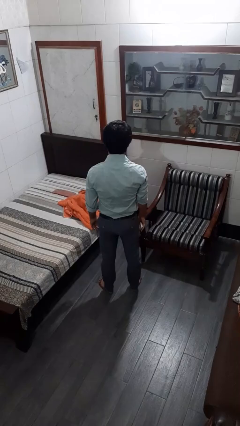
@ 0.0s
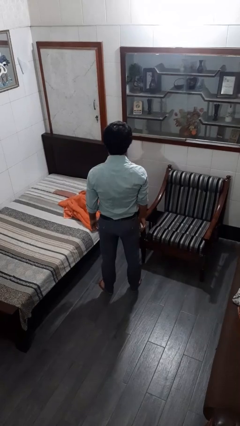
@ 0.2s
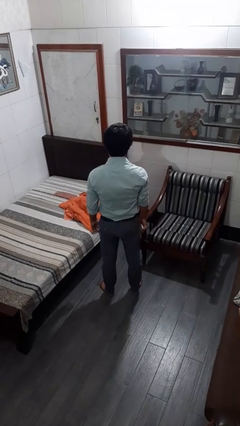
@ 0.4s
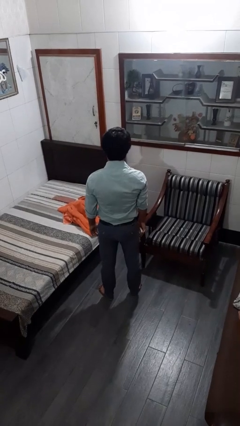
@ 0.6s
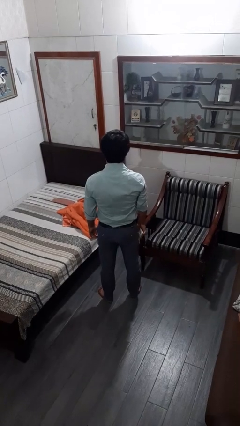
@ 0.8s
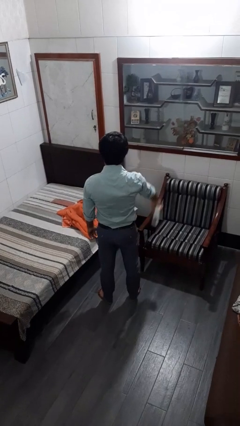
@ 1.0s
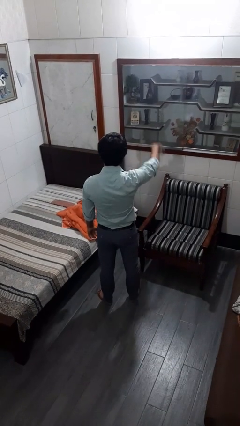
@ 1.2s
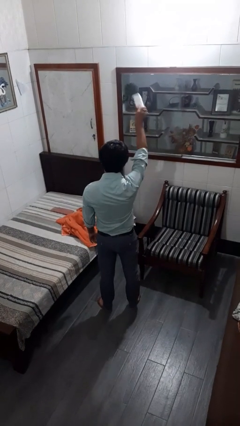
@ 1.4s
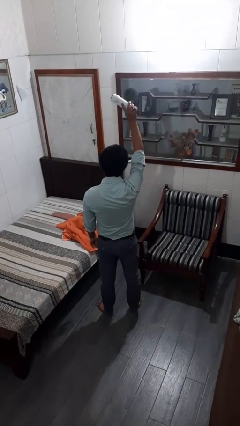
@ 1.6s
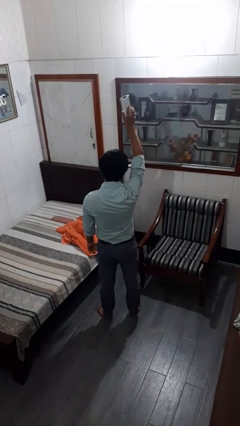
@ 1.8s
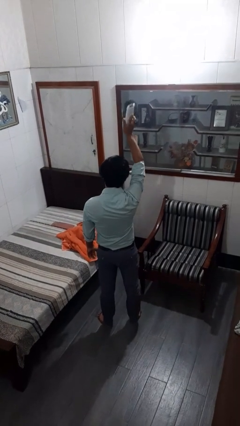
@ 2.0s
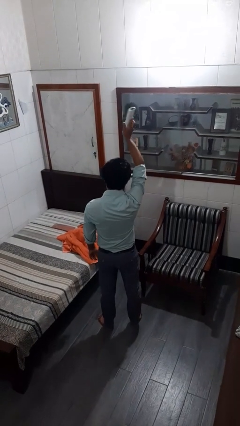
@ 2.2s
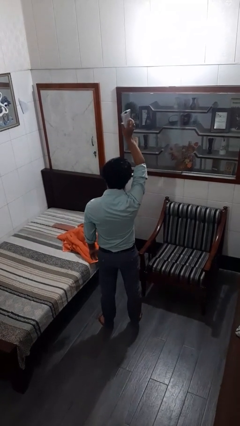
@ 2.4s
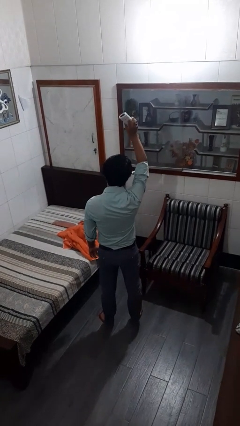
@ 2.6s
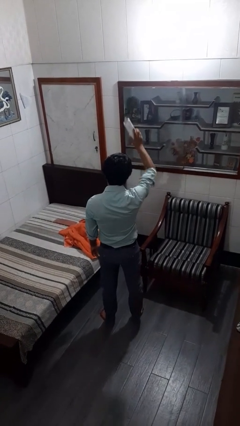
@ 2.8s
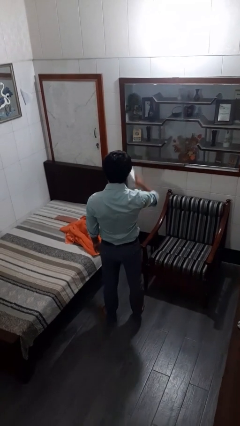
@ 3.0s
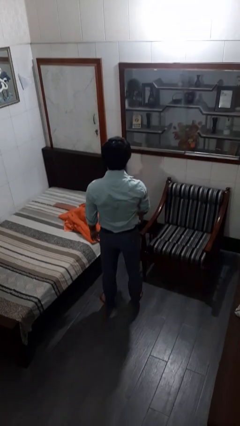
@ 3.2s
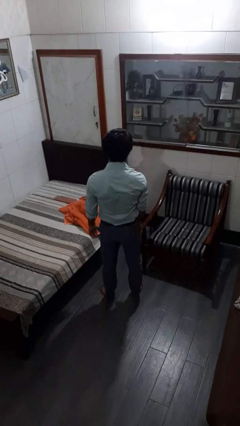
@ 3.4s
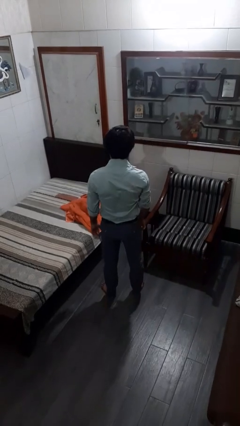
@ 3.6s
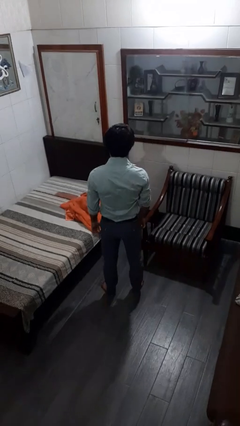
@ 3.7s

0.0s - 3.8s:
person holds object above head

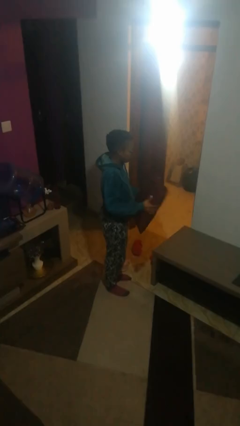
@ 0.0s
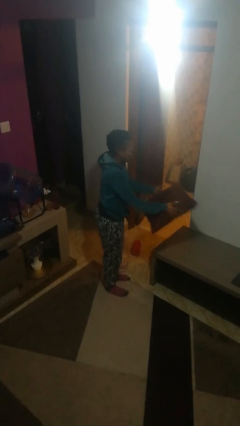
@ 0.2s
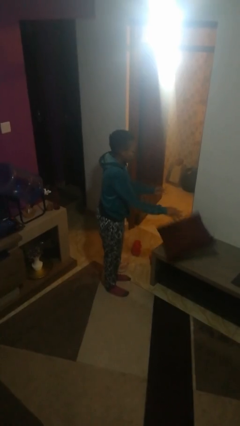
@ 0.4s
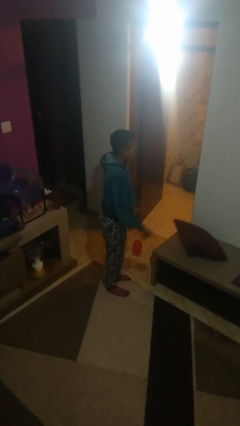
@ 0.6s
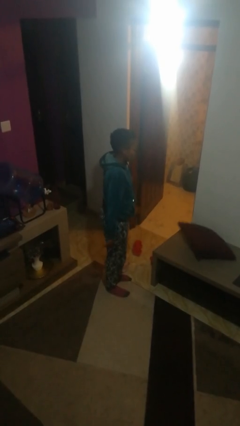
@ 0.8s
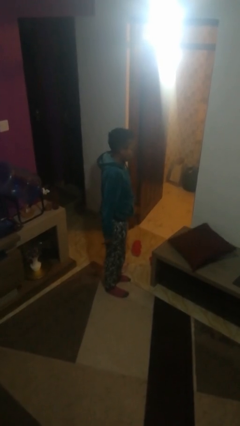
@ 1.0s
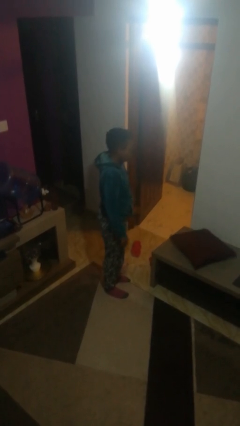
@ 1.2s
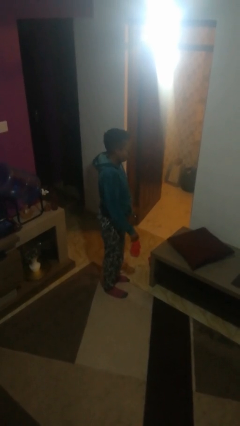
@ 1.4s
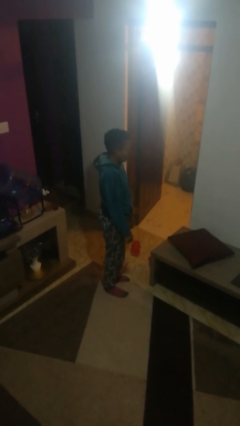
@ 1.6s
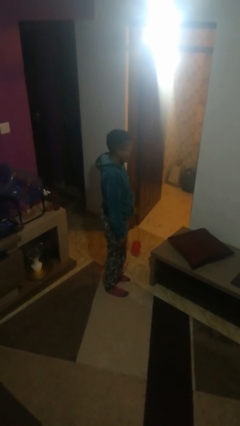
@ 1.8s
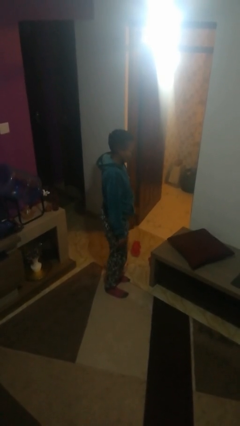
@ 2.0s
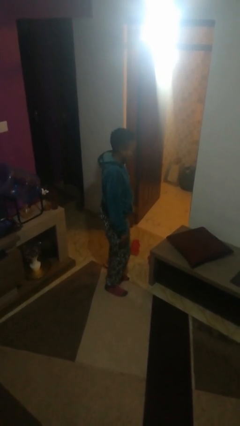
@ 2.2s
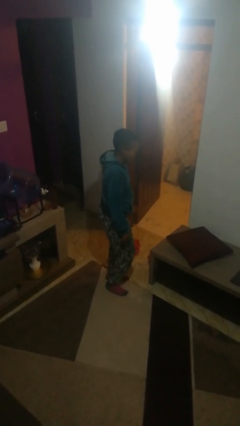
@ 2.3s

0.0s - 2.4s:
person throws object on table

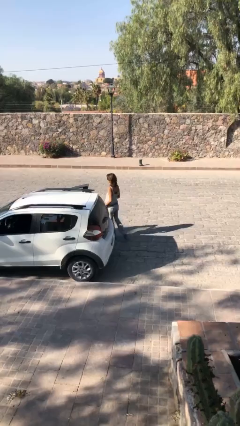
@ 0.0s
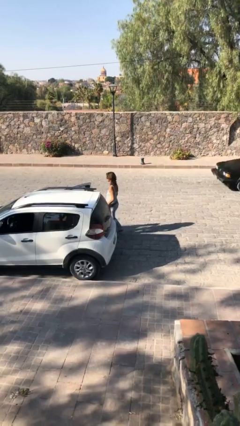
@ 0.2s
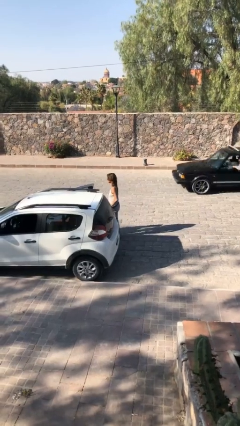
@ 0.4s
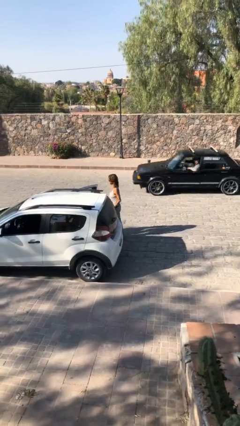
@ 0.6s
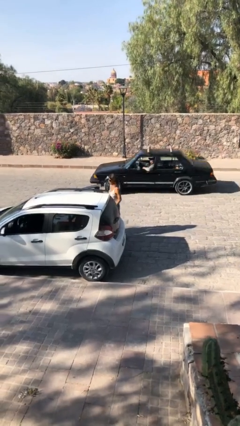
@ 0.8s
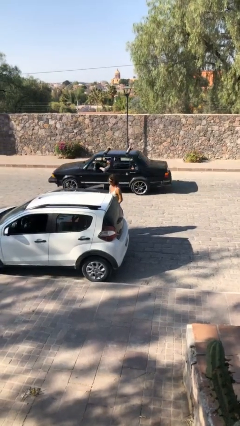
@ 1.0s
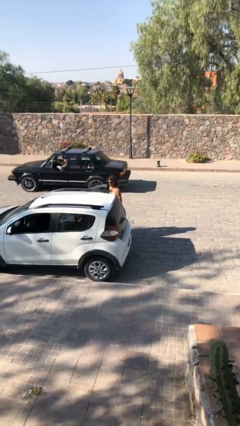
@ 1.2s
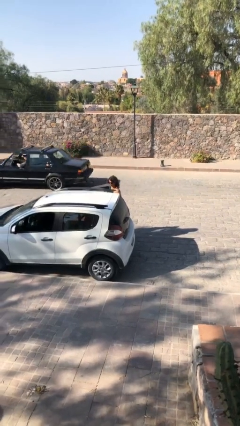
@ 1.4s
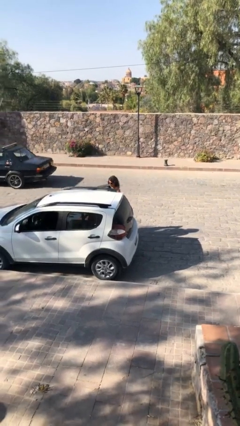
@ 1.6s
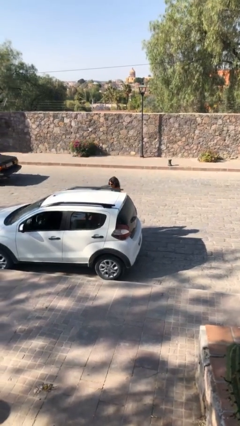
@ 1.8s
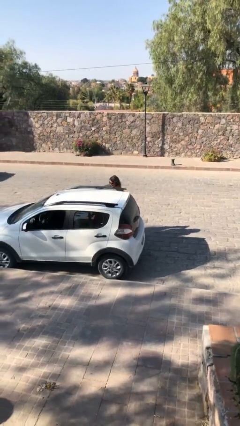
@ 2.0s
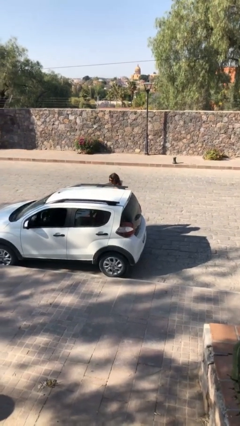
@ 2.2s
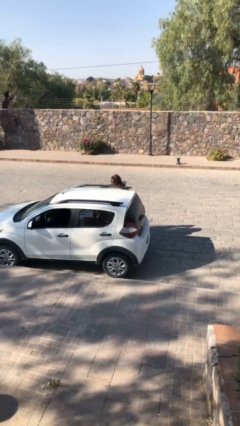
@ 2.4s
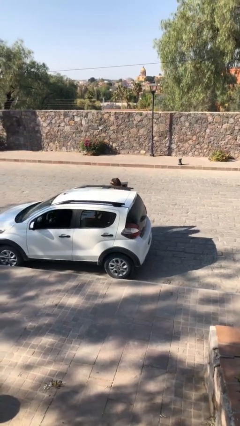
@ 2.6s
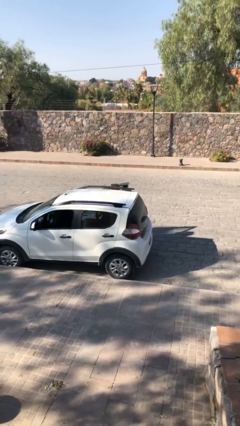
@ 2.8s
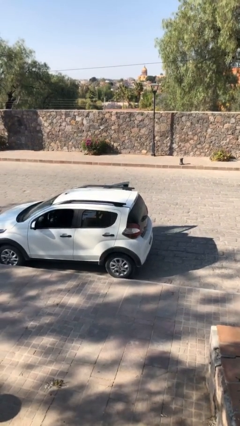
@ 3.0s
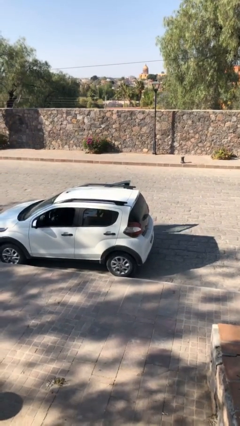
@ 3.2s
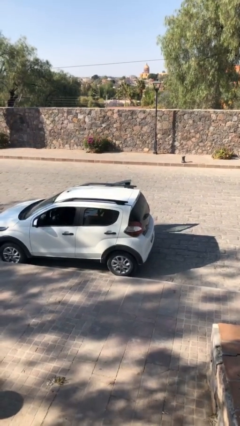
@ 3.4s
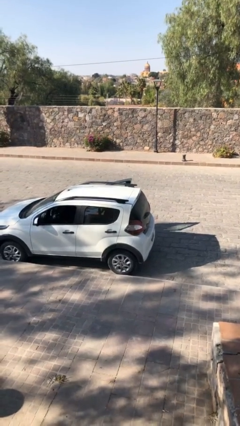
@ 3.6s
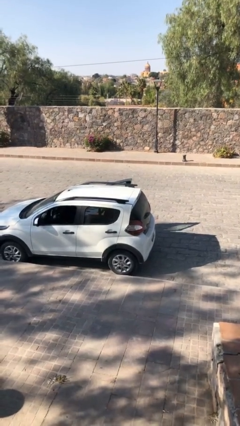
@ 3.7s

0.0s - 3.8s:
person enters car

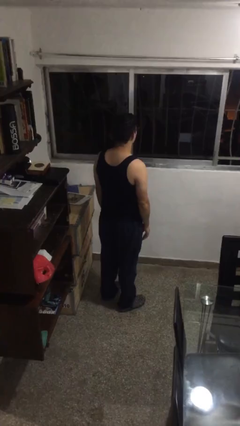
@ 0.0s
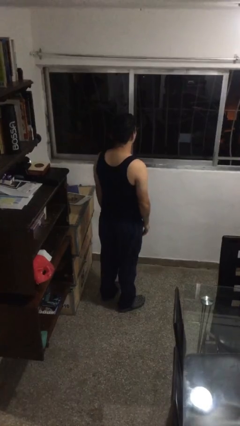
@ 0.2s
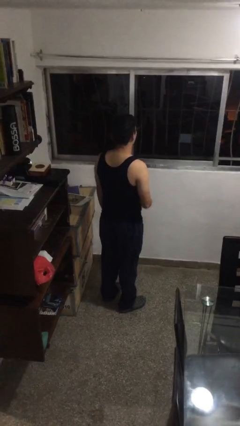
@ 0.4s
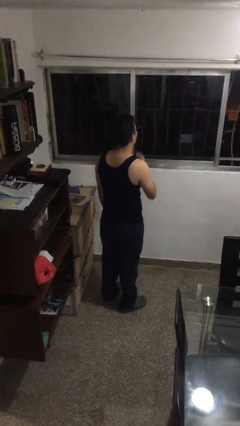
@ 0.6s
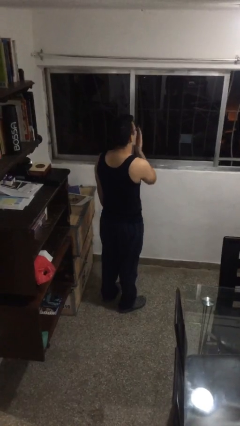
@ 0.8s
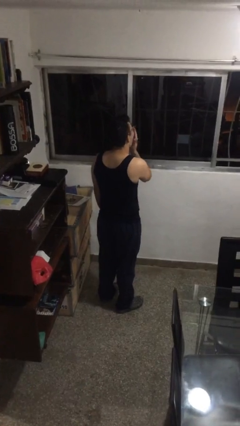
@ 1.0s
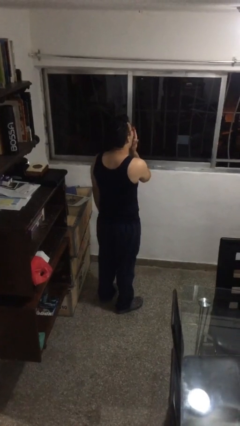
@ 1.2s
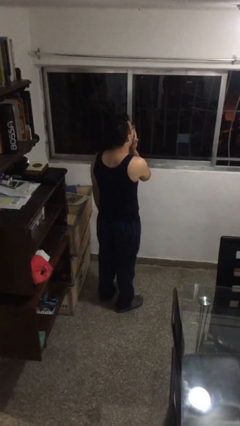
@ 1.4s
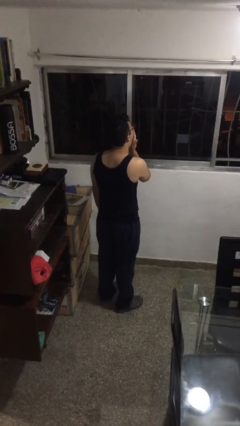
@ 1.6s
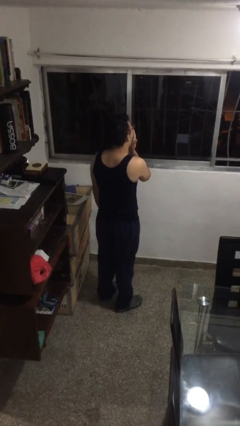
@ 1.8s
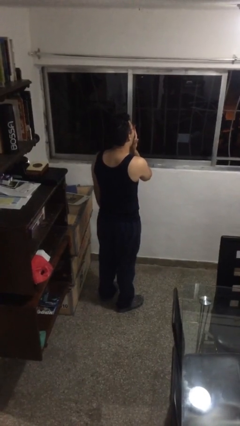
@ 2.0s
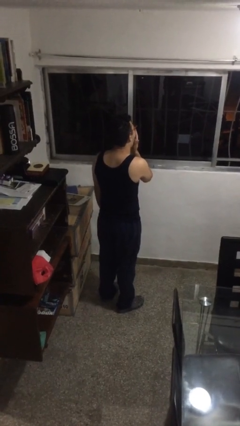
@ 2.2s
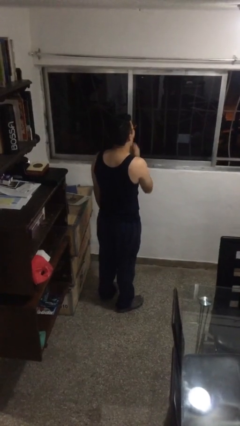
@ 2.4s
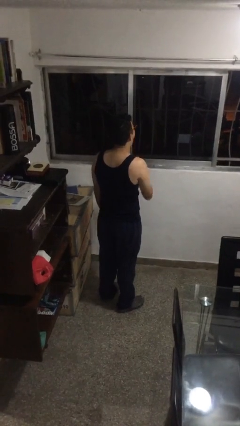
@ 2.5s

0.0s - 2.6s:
person yawns

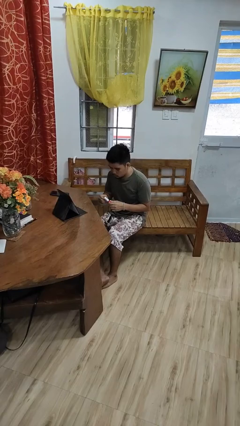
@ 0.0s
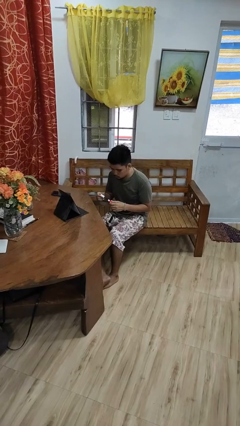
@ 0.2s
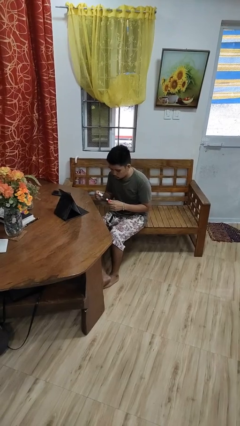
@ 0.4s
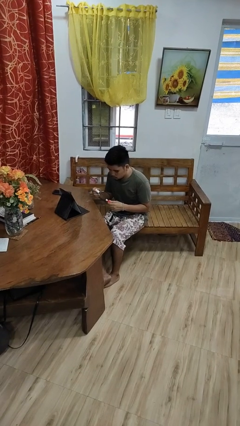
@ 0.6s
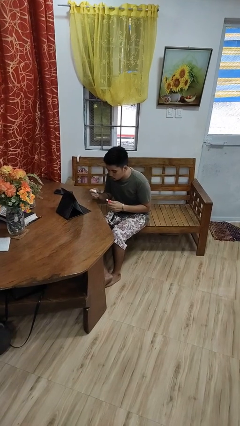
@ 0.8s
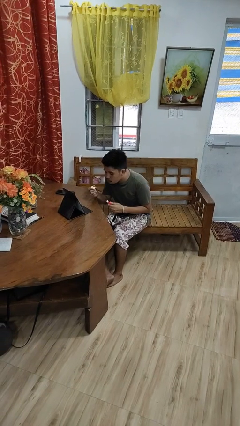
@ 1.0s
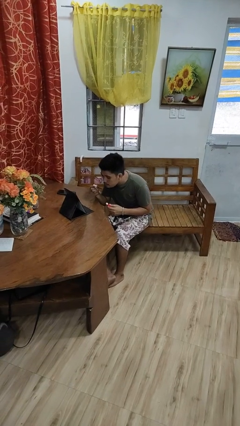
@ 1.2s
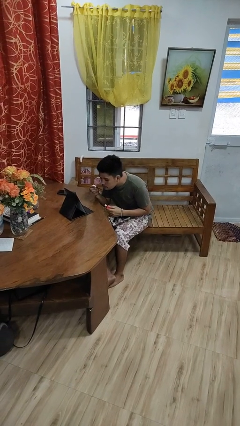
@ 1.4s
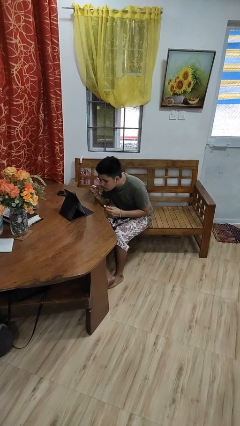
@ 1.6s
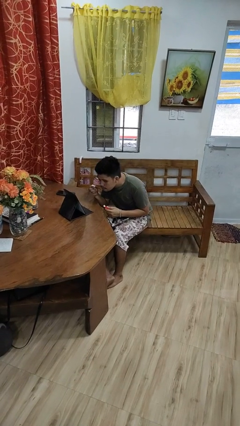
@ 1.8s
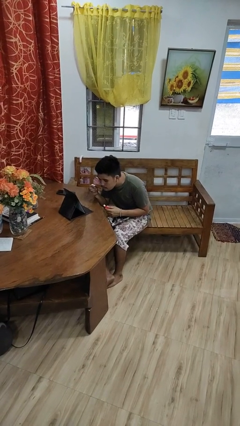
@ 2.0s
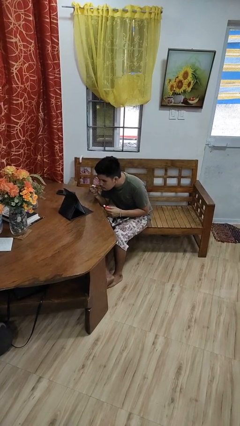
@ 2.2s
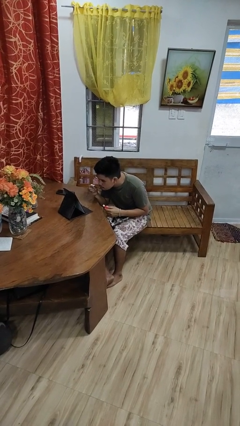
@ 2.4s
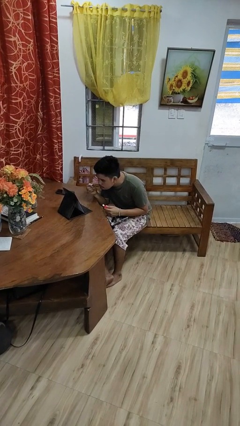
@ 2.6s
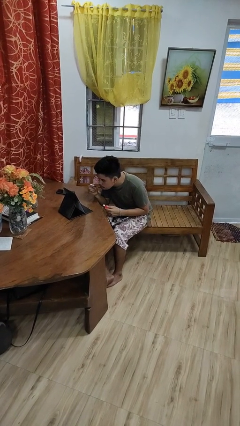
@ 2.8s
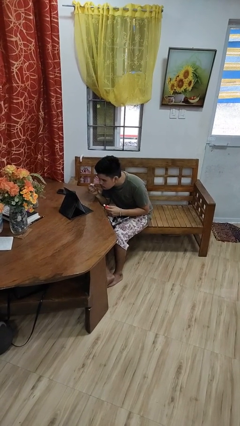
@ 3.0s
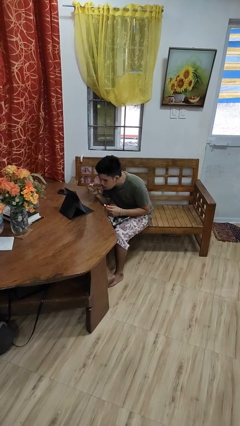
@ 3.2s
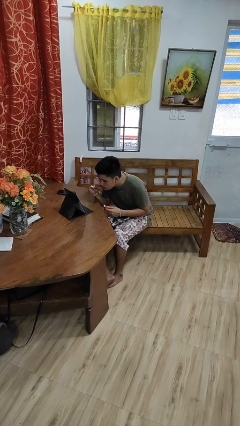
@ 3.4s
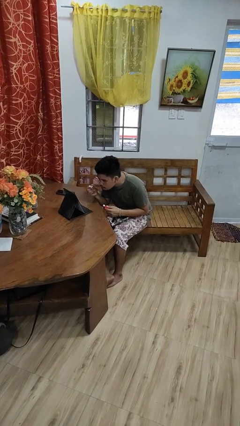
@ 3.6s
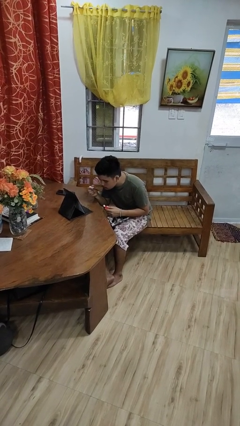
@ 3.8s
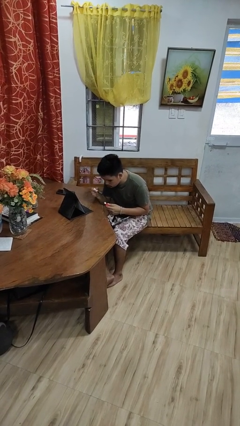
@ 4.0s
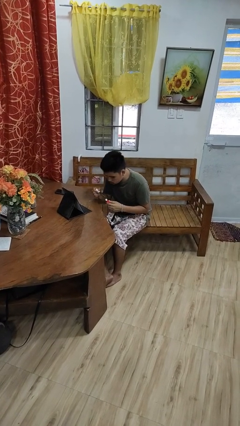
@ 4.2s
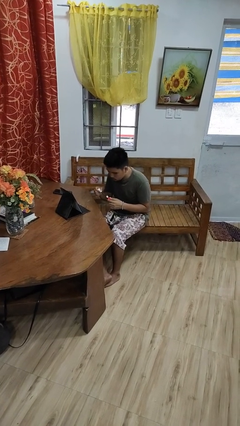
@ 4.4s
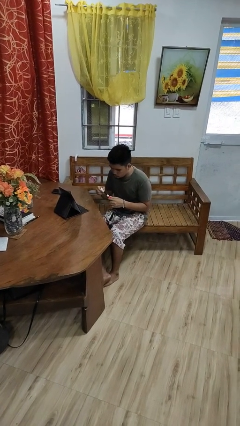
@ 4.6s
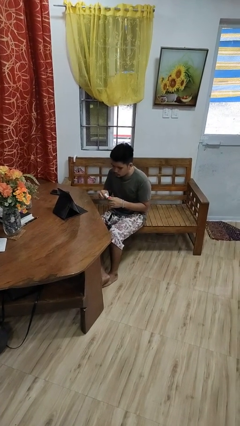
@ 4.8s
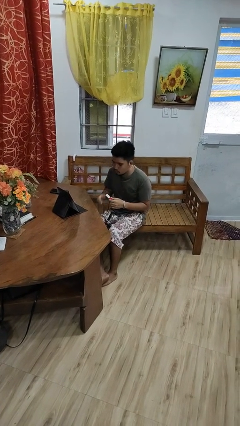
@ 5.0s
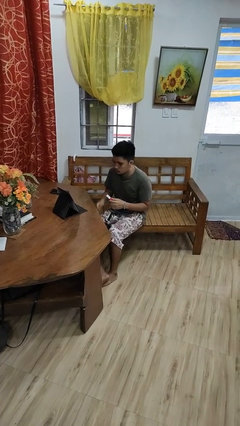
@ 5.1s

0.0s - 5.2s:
person applies lip makeup
